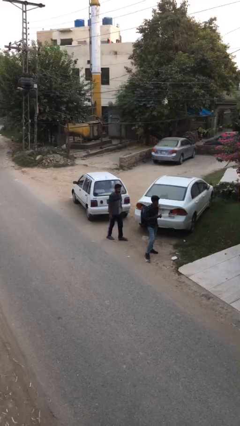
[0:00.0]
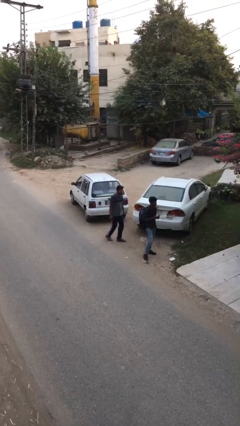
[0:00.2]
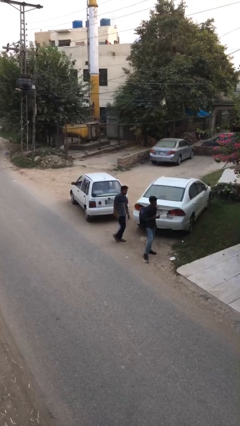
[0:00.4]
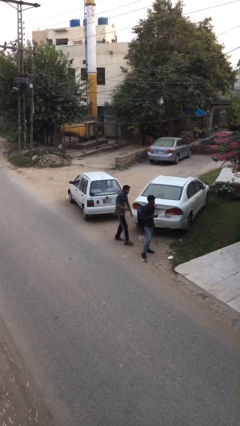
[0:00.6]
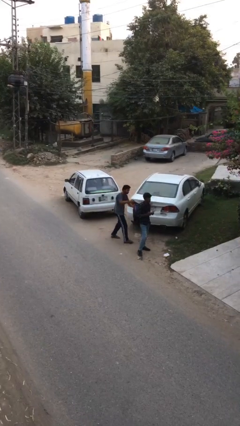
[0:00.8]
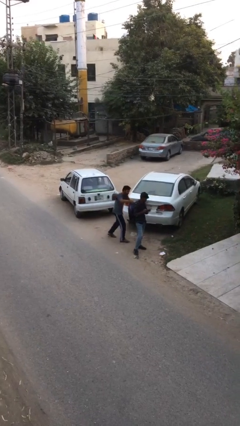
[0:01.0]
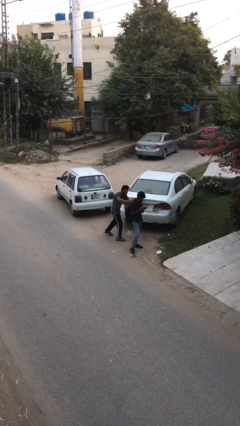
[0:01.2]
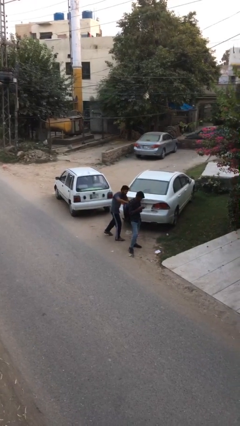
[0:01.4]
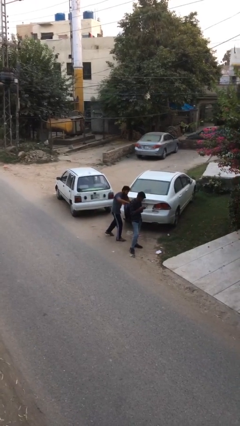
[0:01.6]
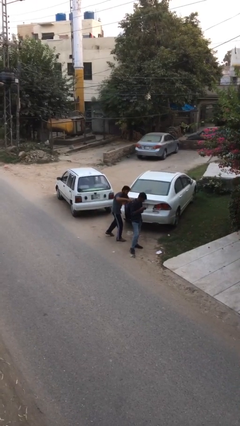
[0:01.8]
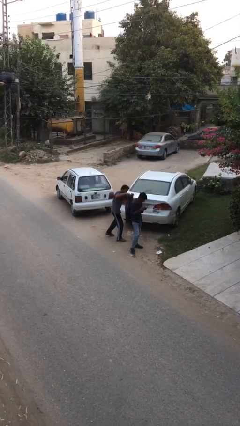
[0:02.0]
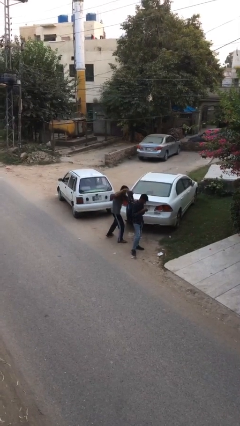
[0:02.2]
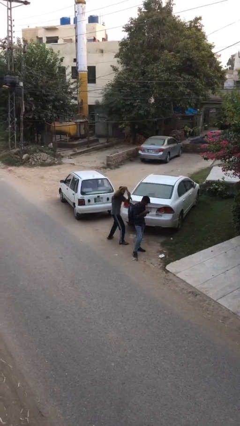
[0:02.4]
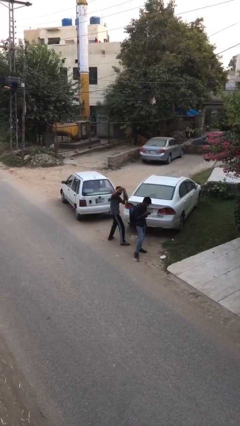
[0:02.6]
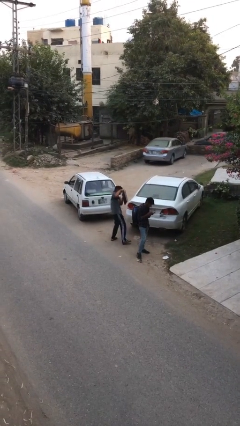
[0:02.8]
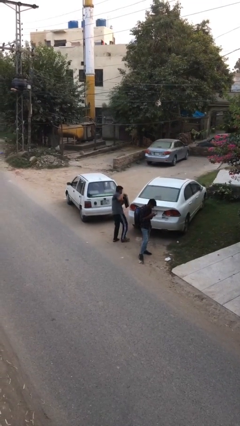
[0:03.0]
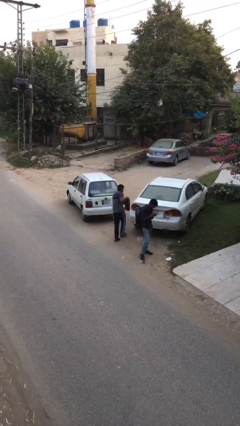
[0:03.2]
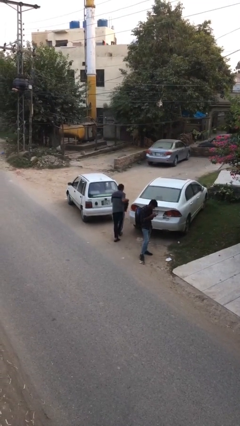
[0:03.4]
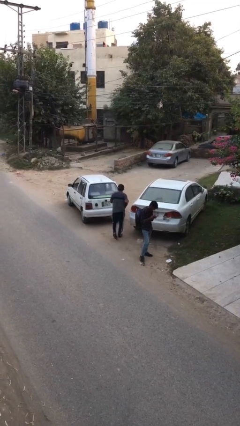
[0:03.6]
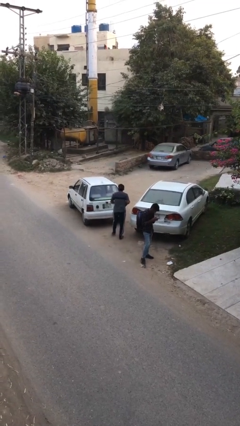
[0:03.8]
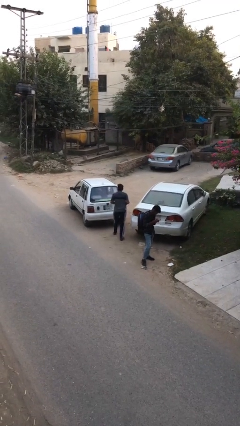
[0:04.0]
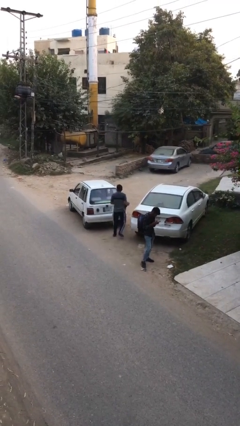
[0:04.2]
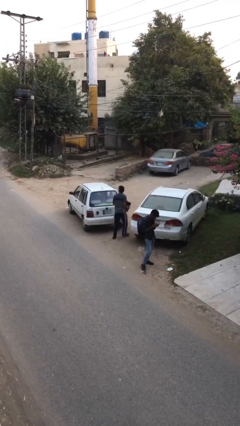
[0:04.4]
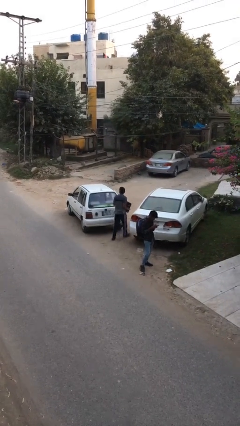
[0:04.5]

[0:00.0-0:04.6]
person steals object from person

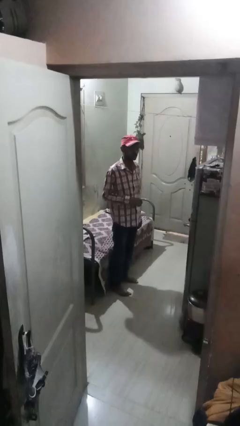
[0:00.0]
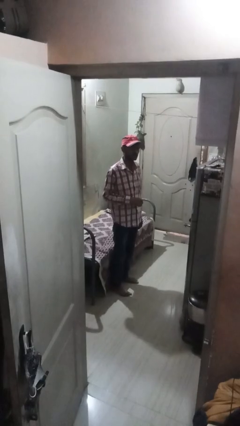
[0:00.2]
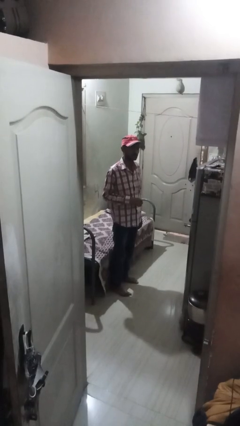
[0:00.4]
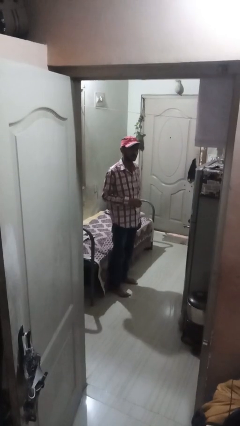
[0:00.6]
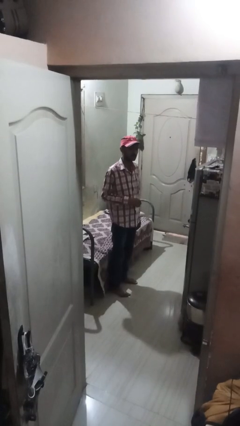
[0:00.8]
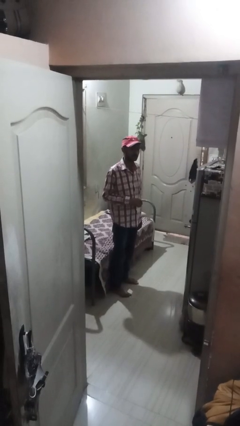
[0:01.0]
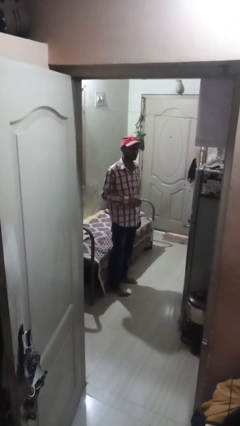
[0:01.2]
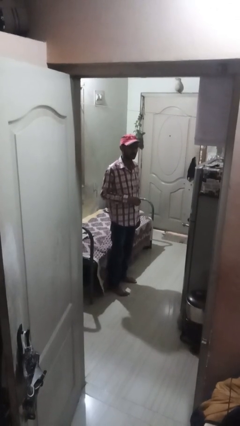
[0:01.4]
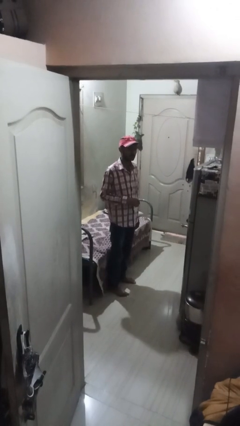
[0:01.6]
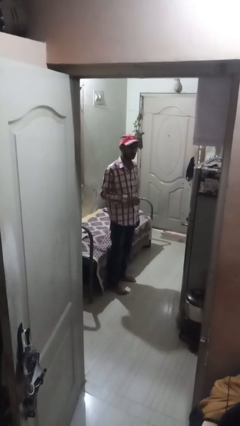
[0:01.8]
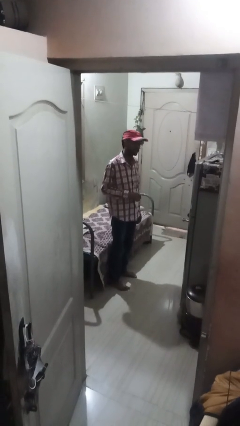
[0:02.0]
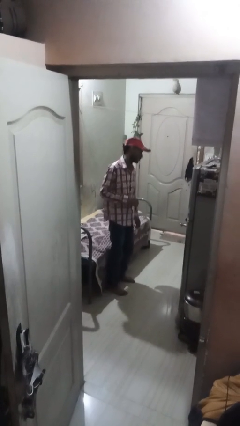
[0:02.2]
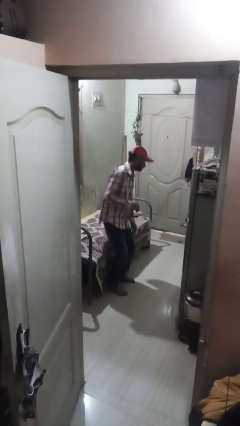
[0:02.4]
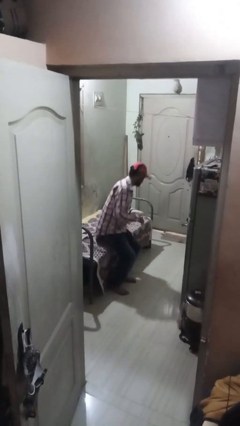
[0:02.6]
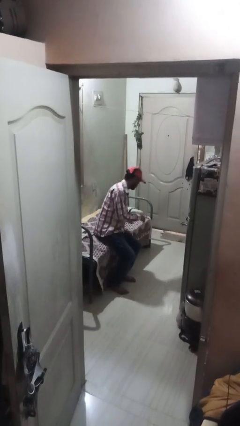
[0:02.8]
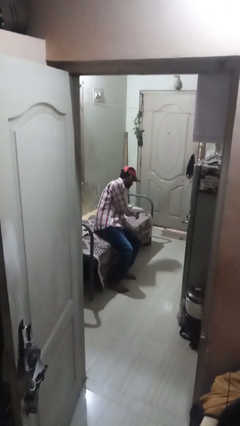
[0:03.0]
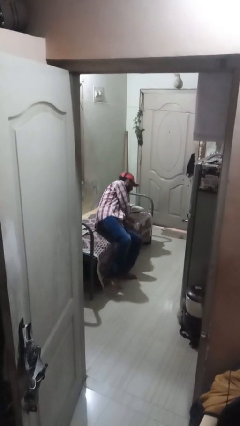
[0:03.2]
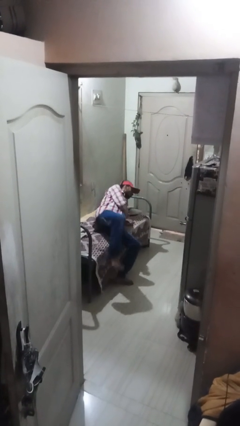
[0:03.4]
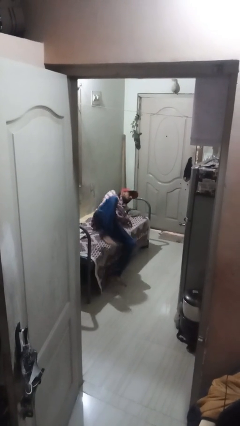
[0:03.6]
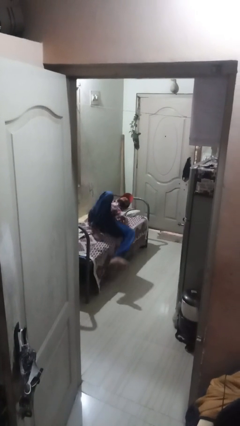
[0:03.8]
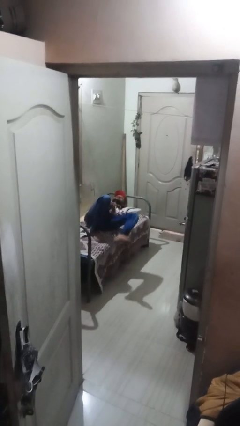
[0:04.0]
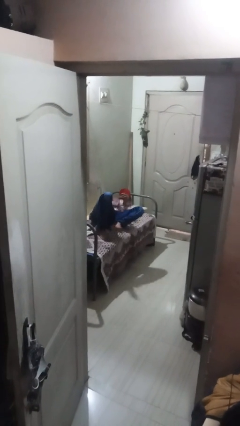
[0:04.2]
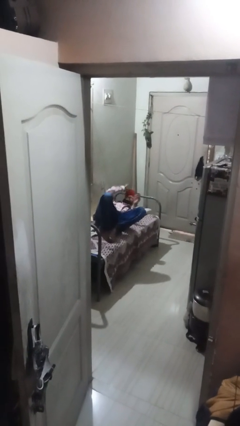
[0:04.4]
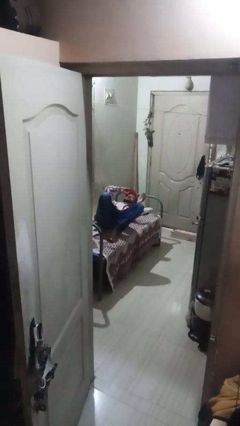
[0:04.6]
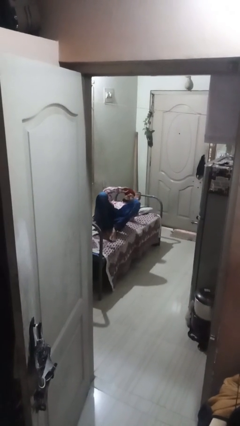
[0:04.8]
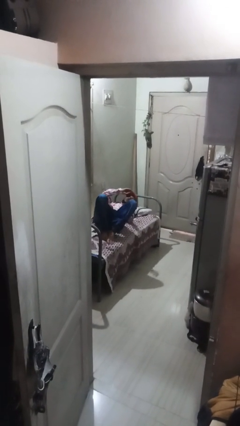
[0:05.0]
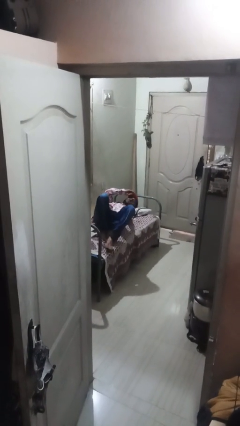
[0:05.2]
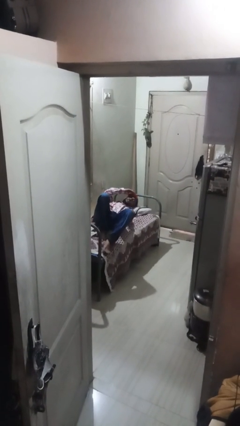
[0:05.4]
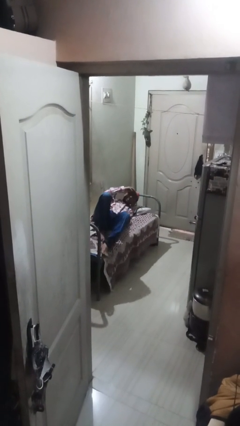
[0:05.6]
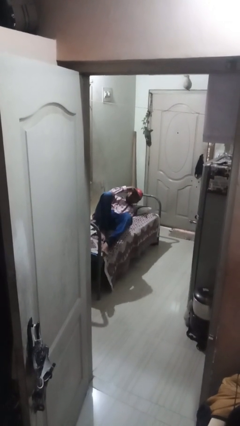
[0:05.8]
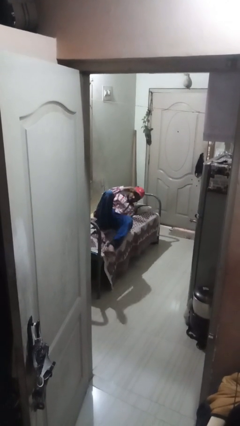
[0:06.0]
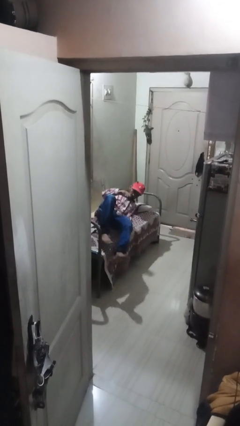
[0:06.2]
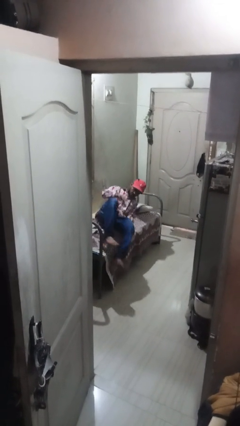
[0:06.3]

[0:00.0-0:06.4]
person lies down on bed

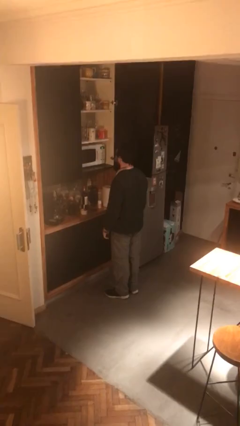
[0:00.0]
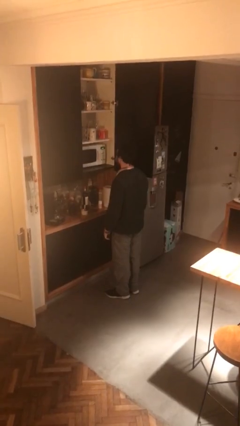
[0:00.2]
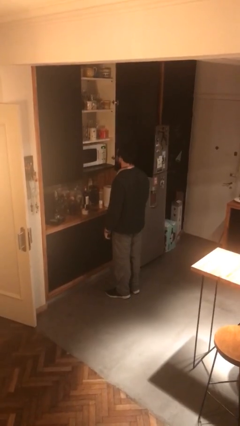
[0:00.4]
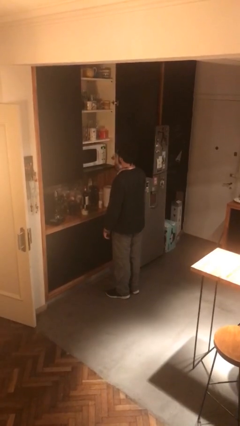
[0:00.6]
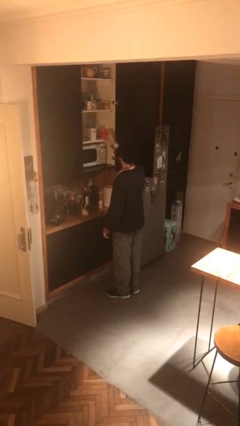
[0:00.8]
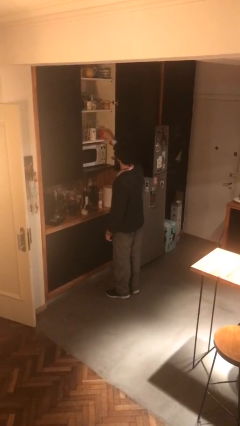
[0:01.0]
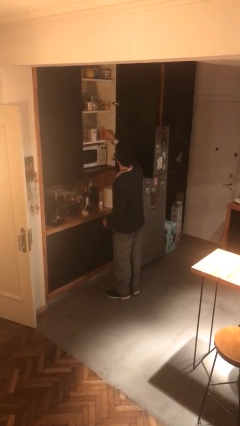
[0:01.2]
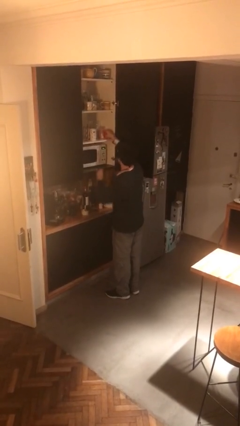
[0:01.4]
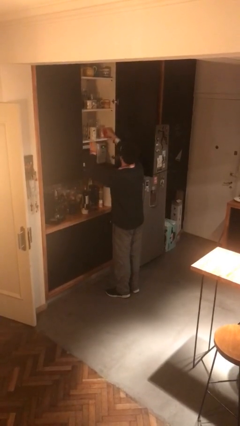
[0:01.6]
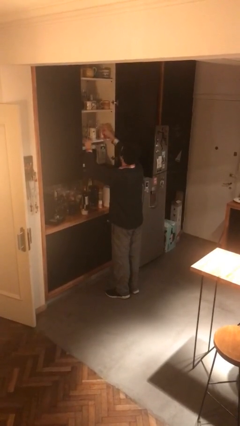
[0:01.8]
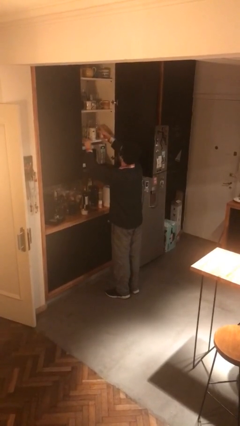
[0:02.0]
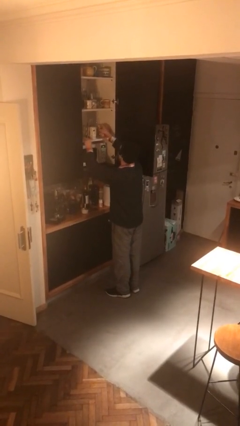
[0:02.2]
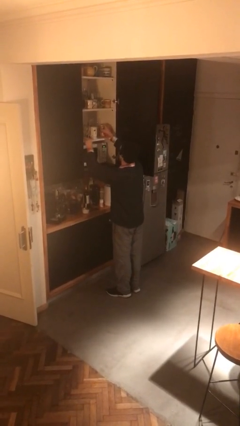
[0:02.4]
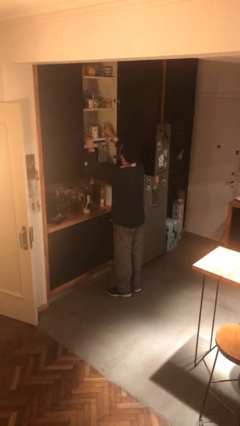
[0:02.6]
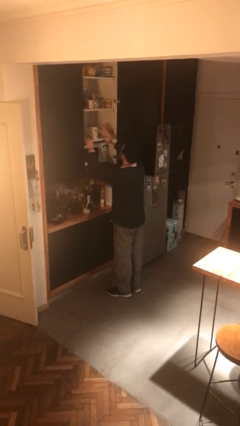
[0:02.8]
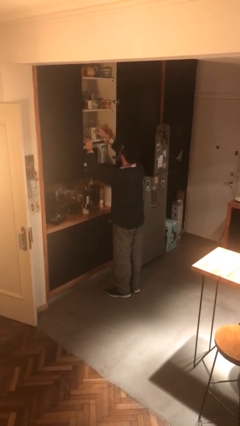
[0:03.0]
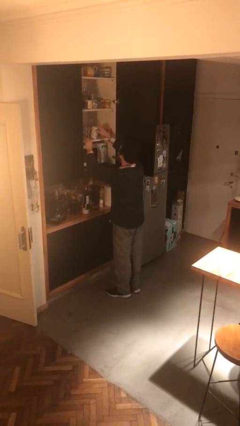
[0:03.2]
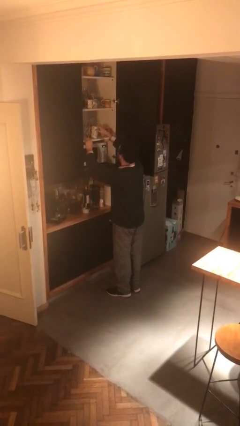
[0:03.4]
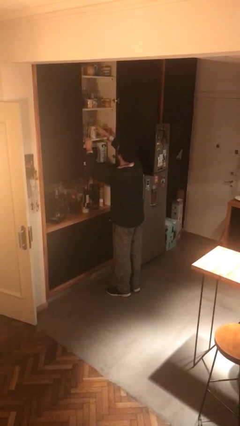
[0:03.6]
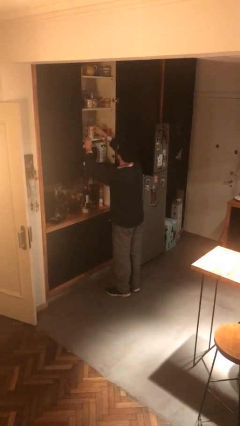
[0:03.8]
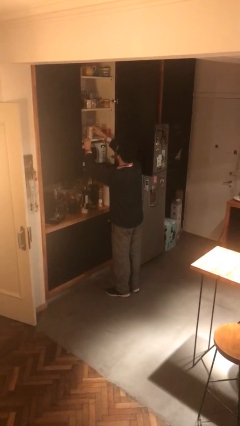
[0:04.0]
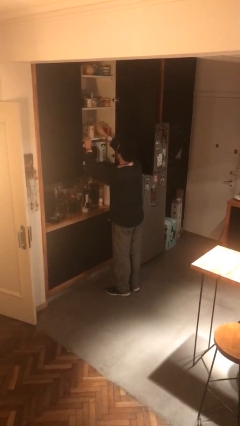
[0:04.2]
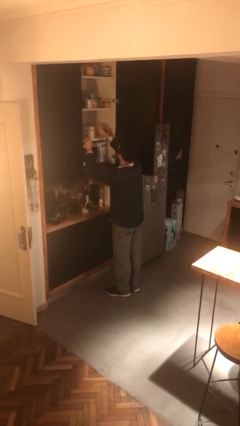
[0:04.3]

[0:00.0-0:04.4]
person searches in cabinet

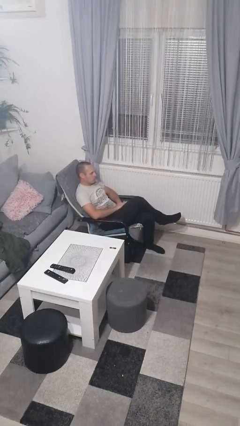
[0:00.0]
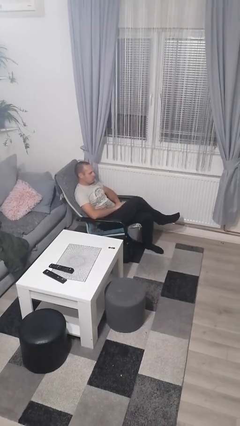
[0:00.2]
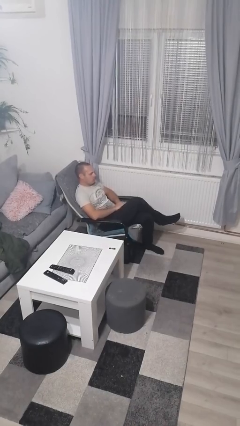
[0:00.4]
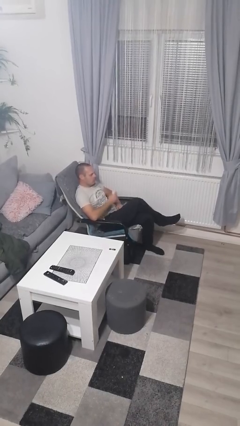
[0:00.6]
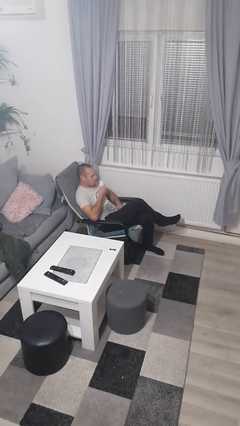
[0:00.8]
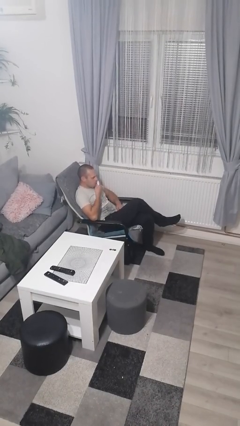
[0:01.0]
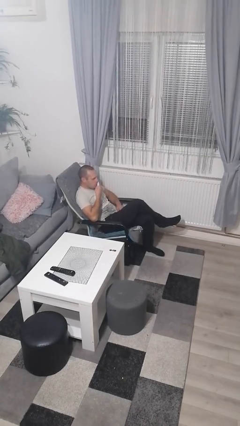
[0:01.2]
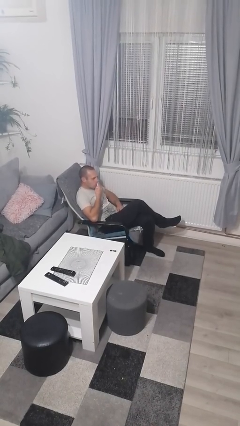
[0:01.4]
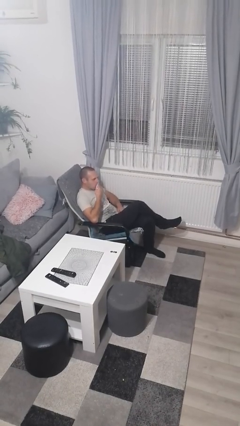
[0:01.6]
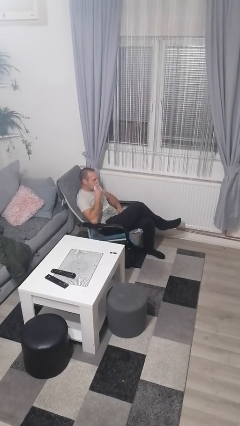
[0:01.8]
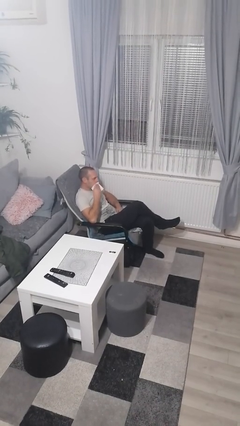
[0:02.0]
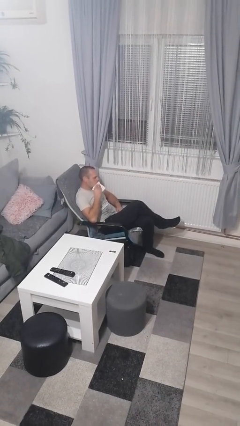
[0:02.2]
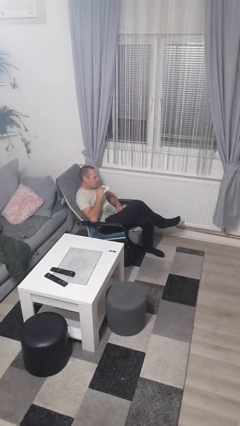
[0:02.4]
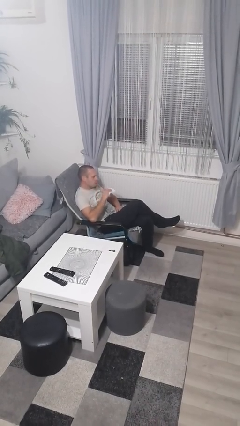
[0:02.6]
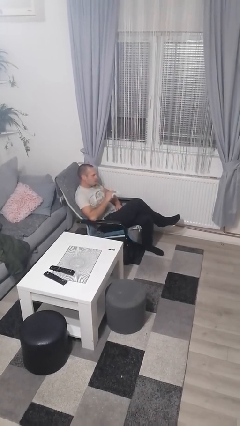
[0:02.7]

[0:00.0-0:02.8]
person wipes mouth with napkin
